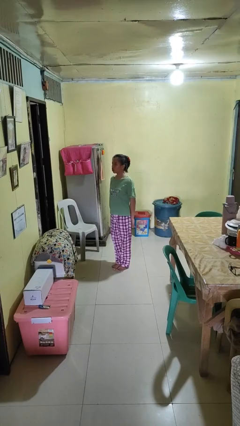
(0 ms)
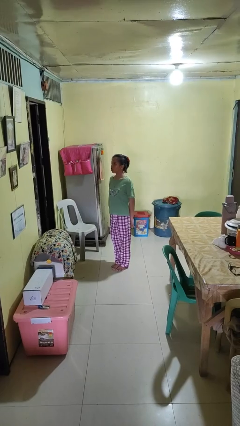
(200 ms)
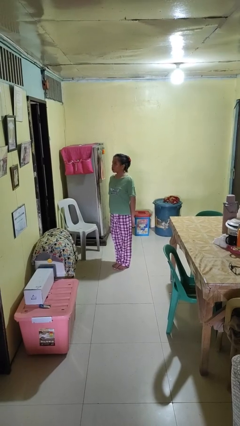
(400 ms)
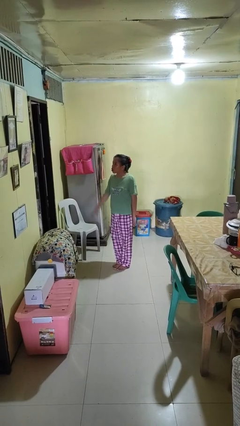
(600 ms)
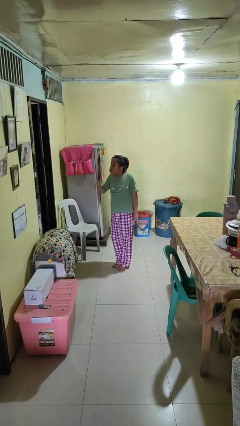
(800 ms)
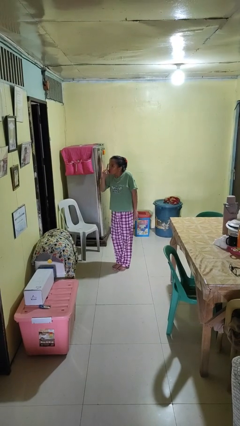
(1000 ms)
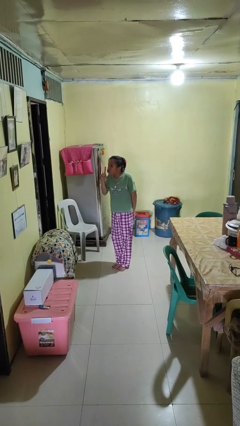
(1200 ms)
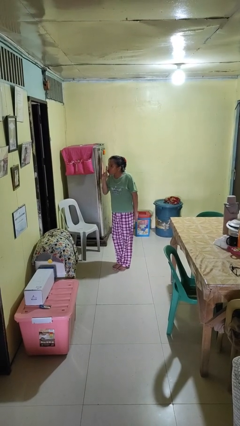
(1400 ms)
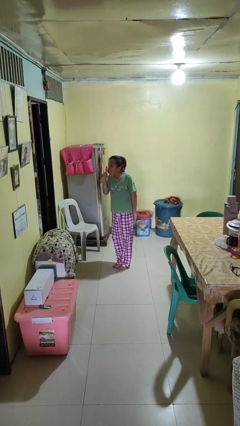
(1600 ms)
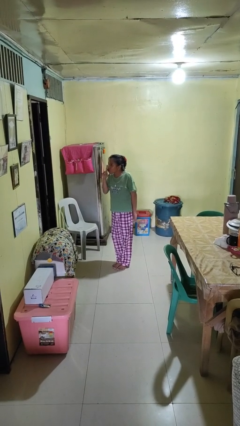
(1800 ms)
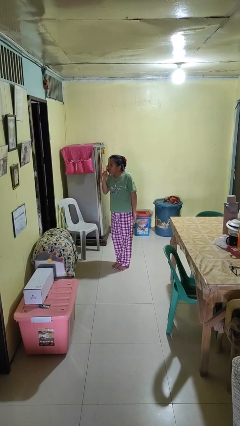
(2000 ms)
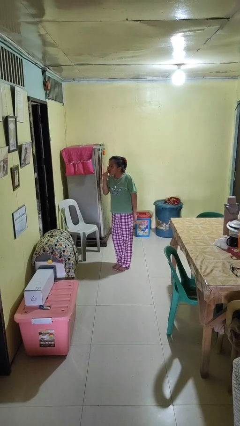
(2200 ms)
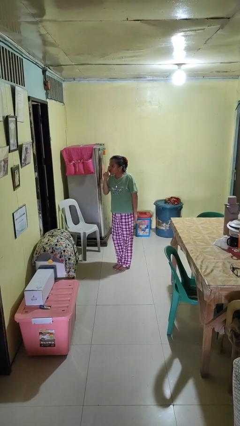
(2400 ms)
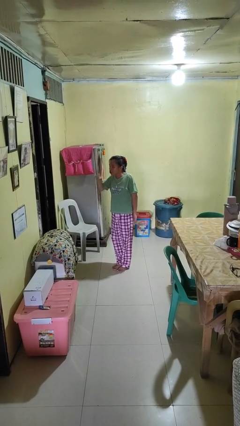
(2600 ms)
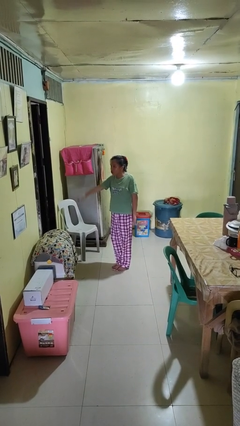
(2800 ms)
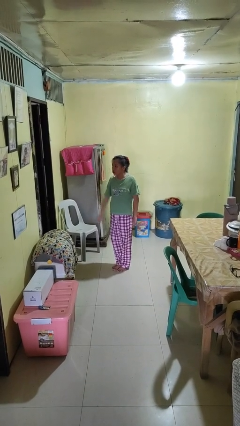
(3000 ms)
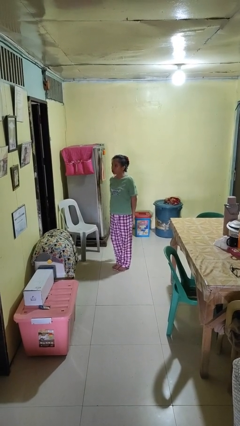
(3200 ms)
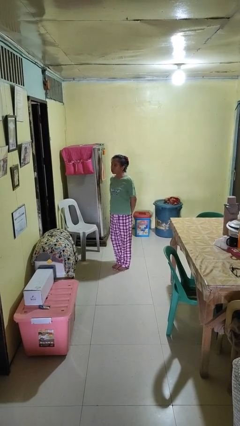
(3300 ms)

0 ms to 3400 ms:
person gestures be quiet

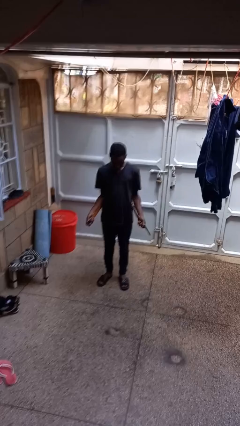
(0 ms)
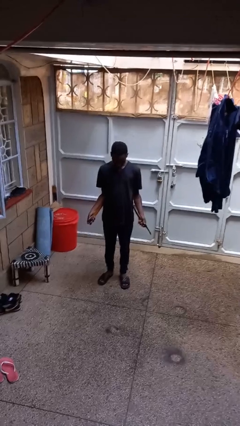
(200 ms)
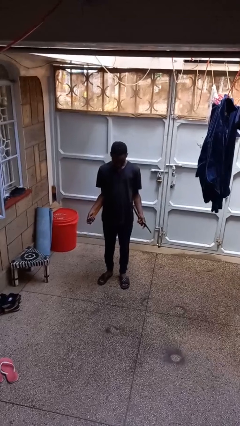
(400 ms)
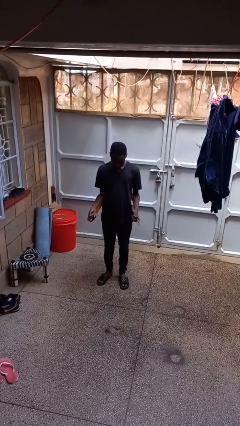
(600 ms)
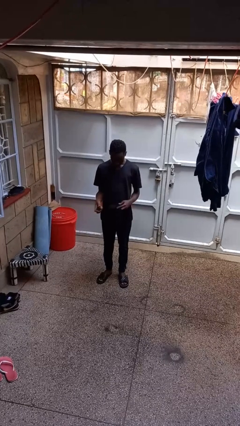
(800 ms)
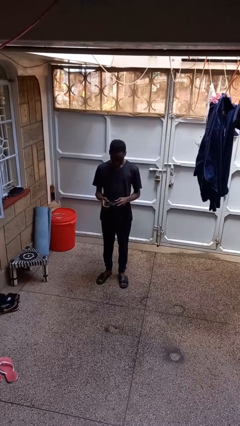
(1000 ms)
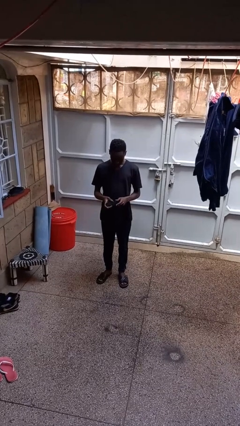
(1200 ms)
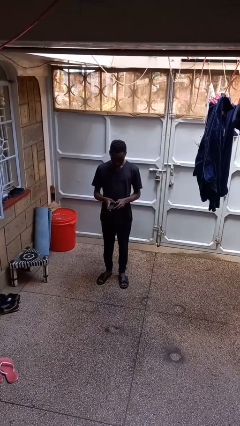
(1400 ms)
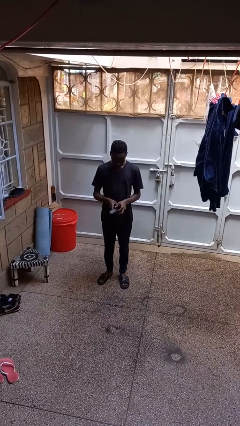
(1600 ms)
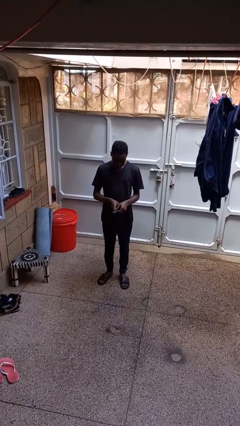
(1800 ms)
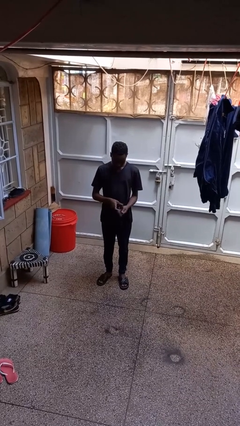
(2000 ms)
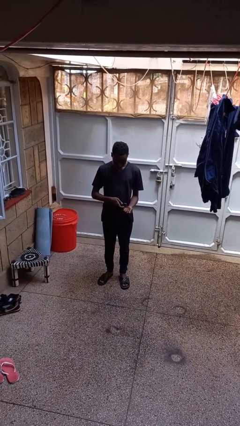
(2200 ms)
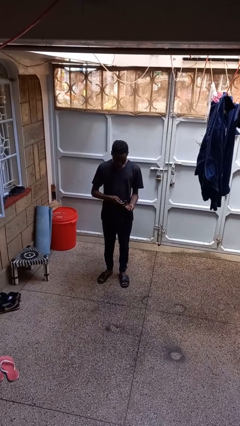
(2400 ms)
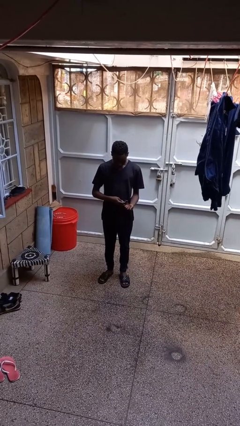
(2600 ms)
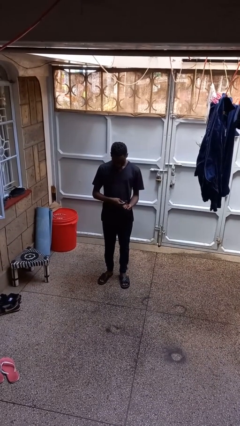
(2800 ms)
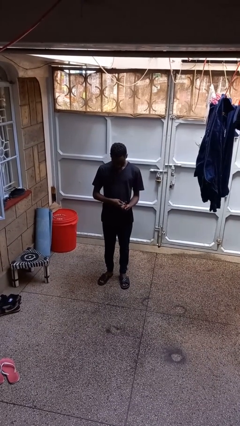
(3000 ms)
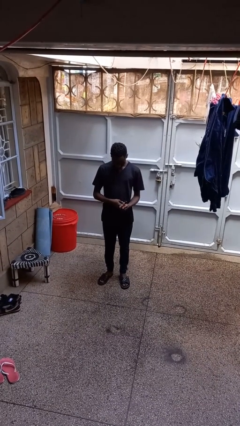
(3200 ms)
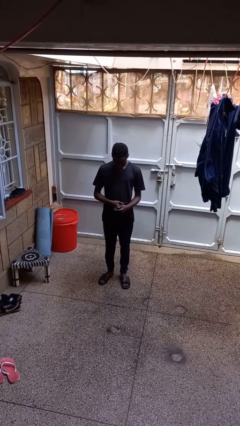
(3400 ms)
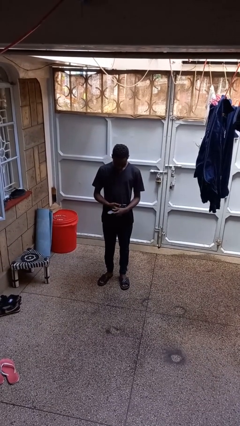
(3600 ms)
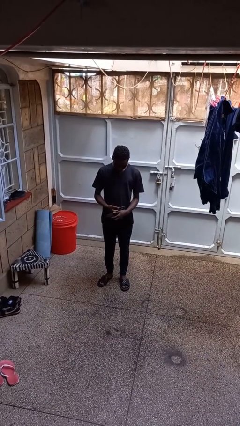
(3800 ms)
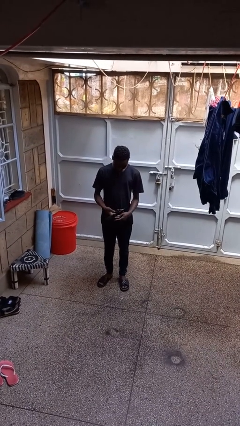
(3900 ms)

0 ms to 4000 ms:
person puts on belt

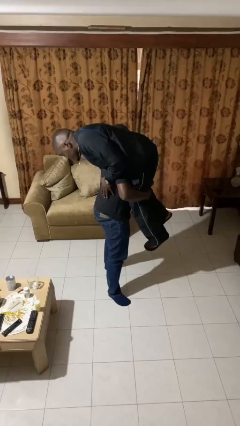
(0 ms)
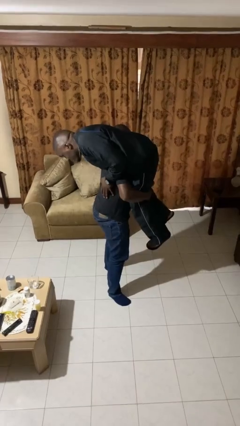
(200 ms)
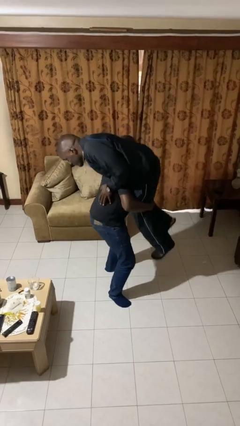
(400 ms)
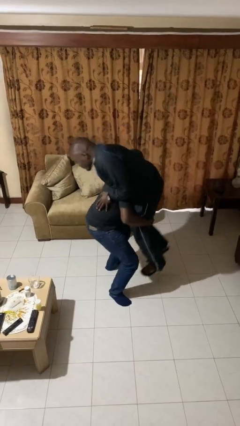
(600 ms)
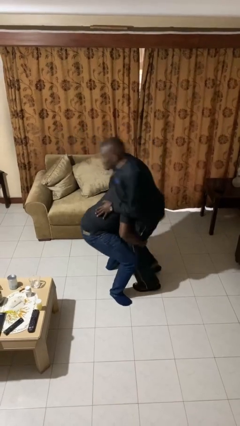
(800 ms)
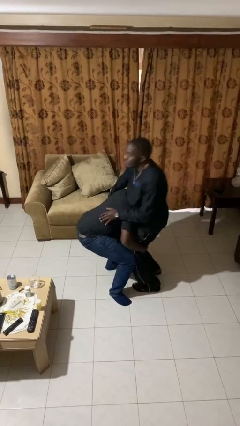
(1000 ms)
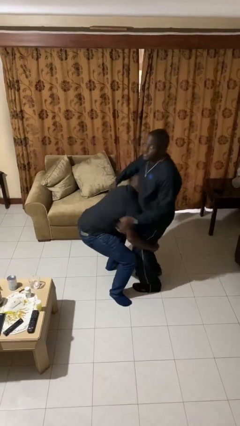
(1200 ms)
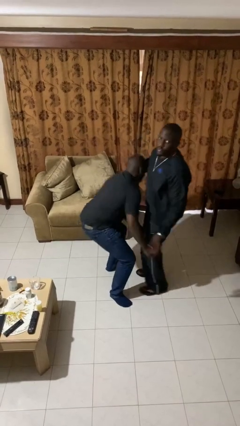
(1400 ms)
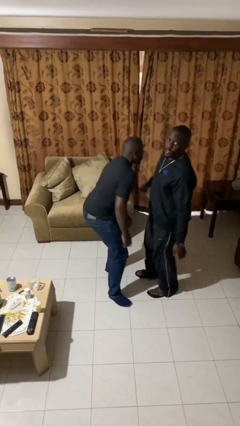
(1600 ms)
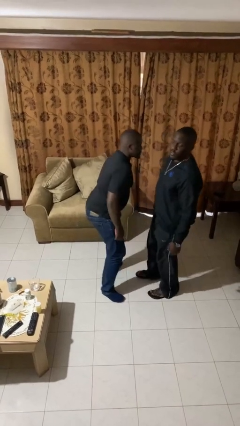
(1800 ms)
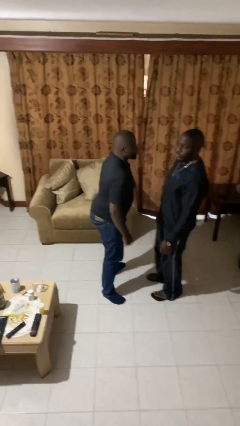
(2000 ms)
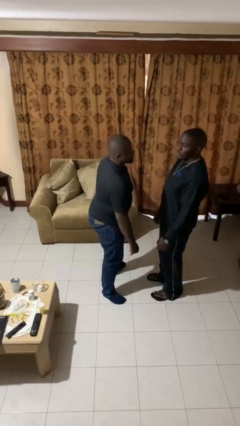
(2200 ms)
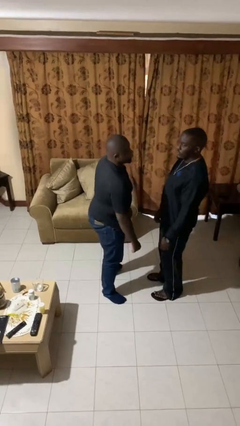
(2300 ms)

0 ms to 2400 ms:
person puts down person

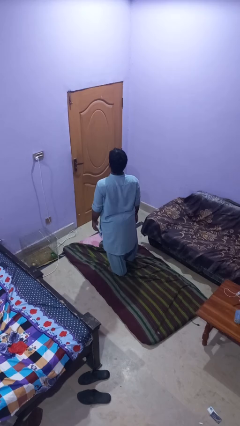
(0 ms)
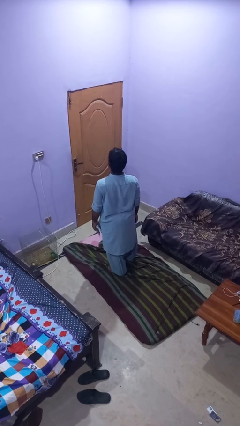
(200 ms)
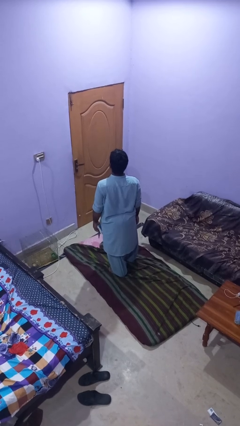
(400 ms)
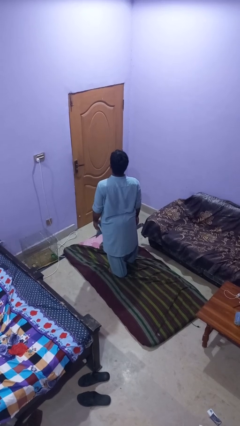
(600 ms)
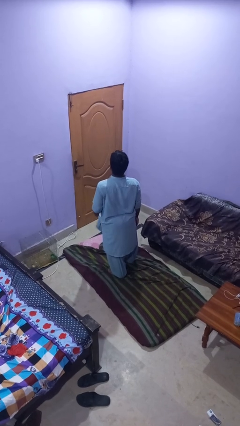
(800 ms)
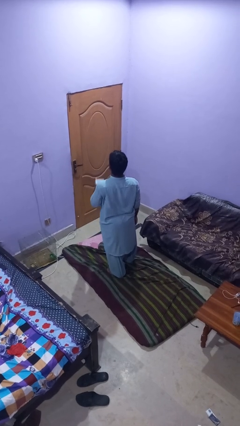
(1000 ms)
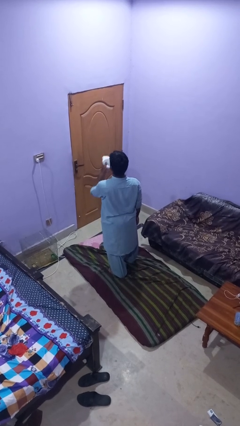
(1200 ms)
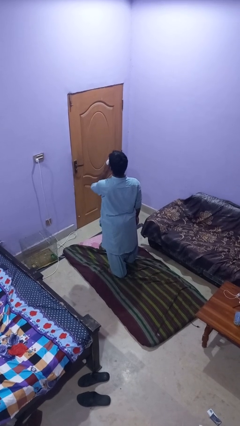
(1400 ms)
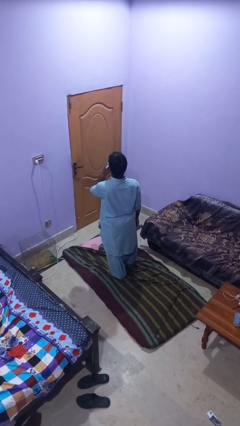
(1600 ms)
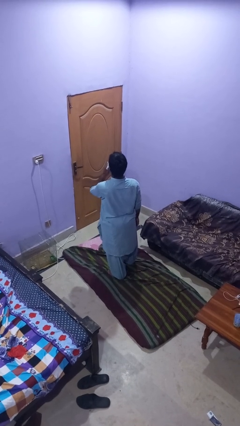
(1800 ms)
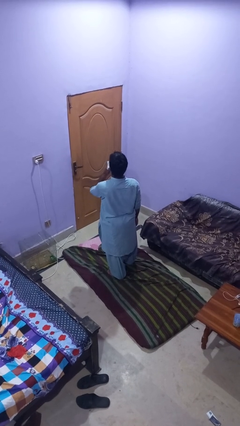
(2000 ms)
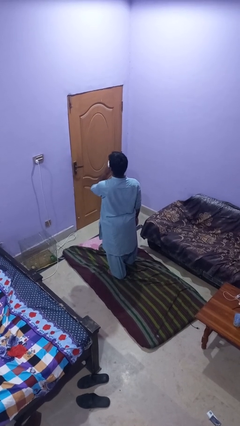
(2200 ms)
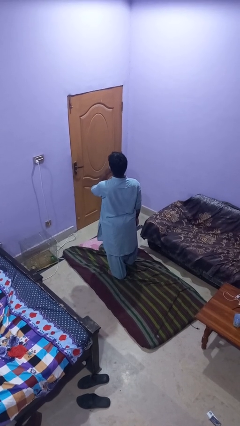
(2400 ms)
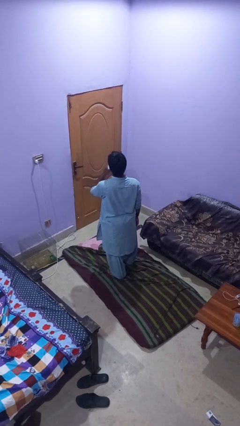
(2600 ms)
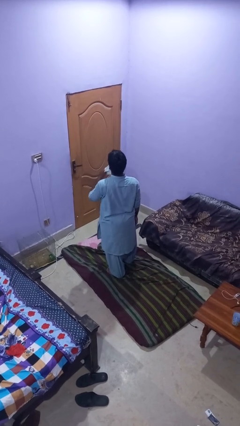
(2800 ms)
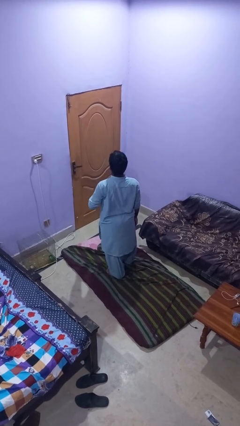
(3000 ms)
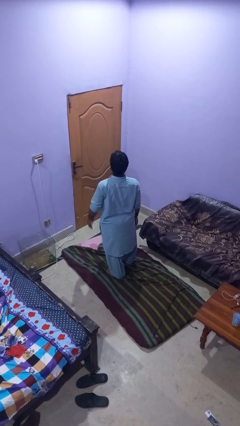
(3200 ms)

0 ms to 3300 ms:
person wipes mouth with napkin

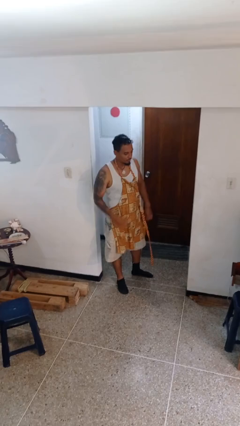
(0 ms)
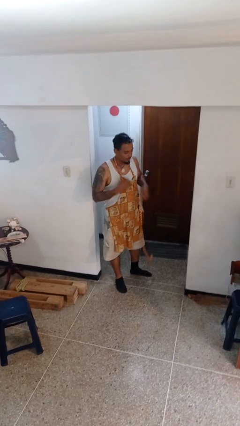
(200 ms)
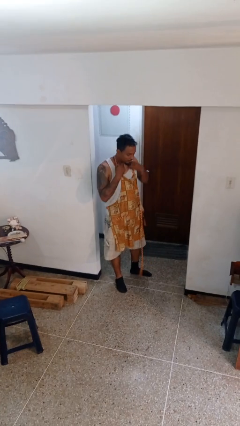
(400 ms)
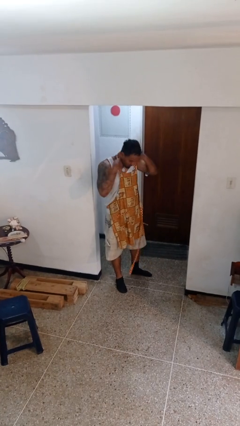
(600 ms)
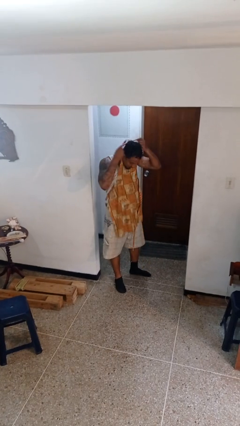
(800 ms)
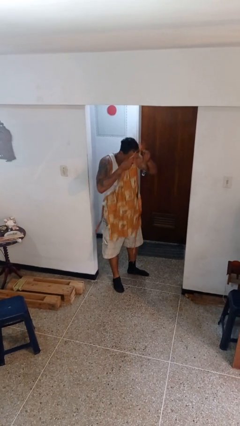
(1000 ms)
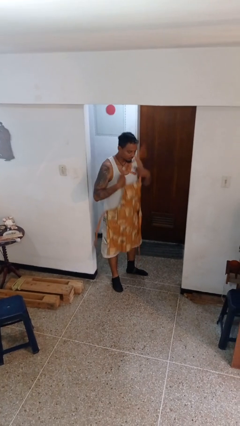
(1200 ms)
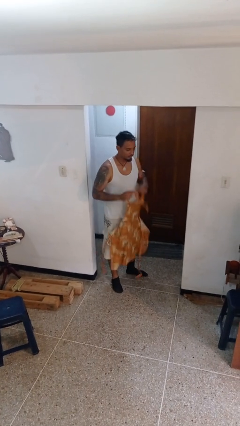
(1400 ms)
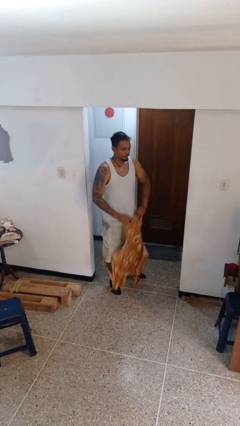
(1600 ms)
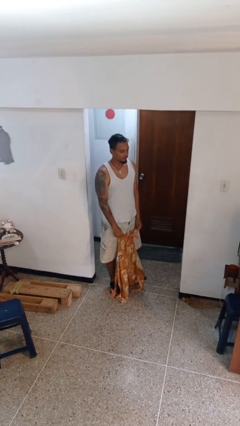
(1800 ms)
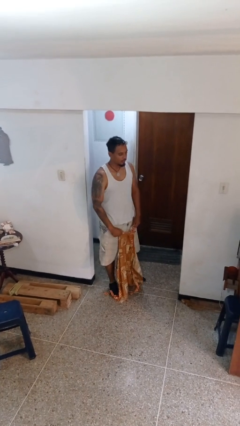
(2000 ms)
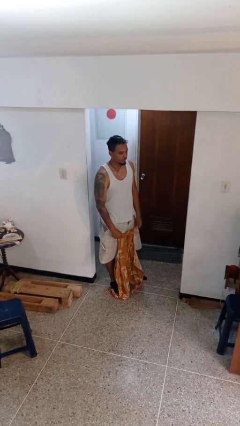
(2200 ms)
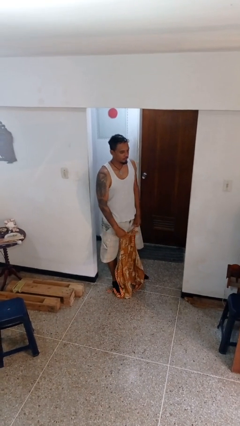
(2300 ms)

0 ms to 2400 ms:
person takes off apron

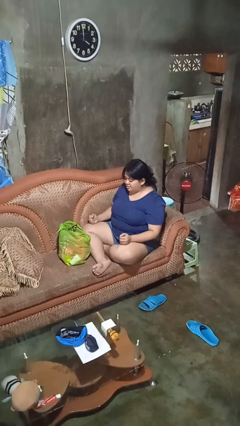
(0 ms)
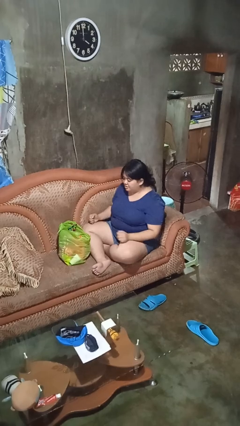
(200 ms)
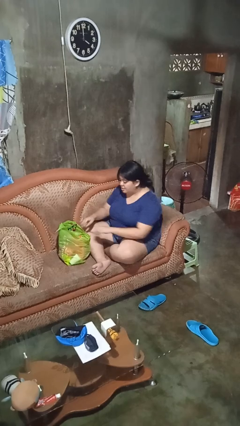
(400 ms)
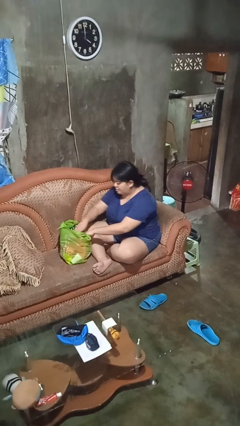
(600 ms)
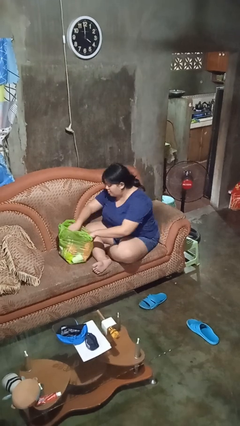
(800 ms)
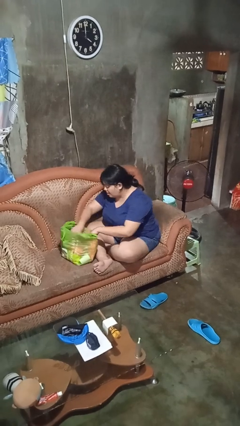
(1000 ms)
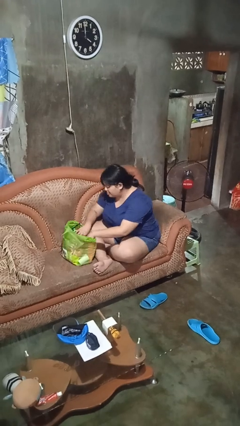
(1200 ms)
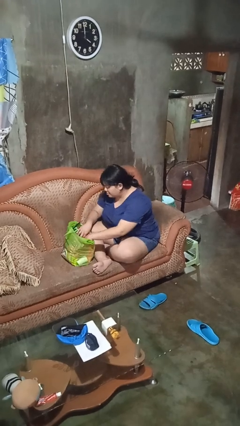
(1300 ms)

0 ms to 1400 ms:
person searches in bag

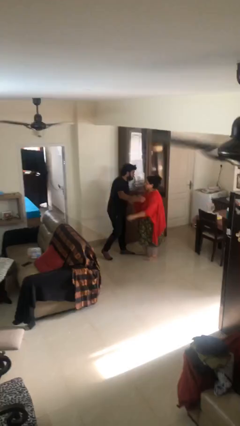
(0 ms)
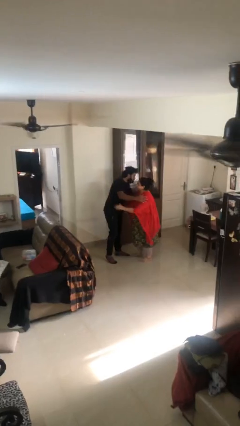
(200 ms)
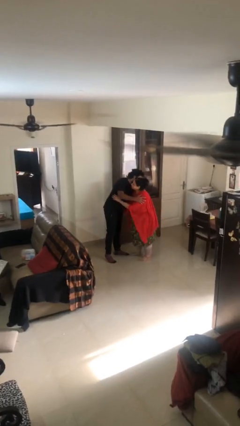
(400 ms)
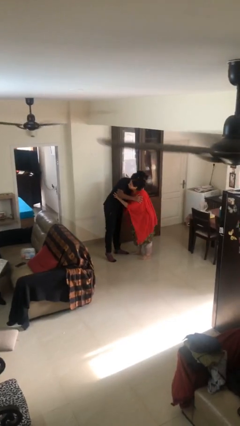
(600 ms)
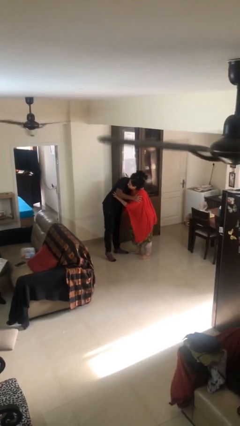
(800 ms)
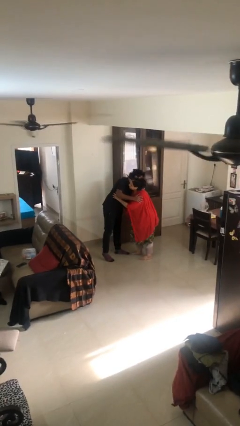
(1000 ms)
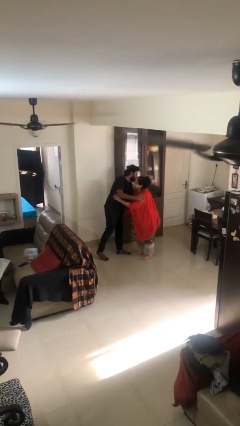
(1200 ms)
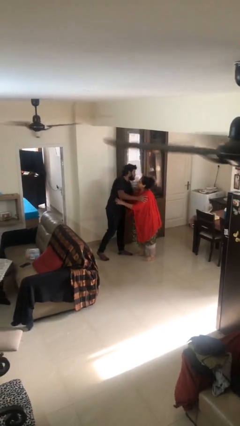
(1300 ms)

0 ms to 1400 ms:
person embraces person
